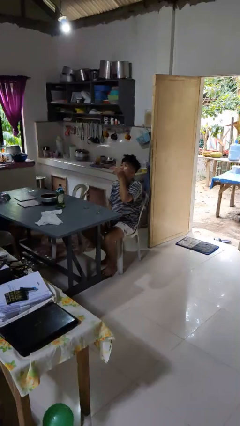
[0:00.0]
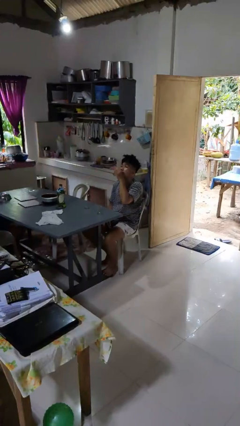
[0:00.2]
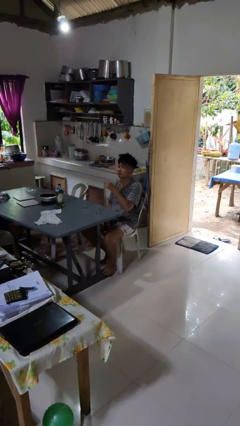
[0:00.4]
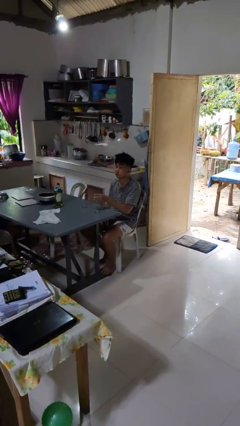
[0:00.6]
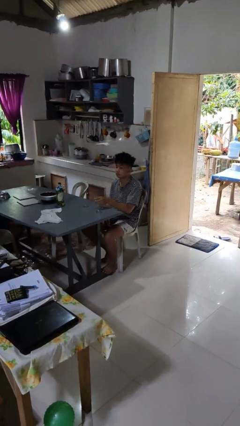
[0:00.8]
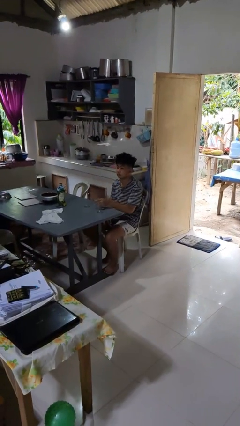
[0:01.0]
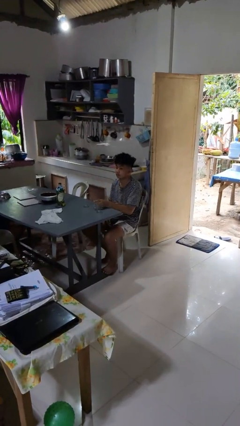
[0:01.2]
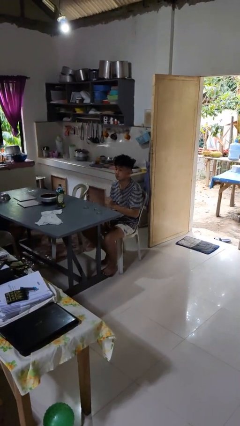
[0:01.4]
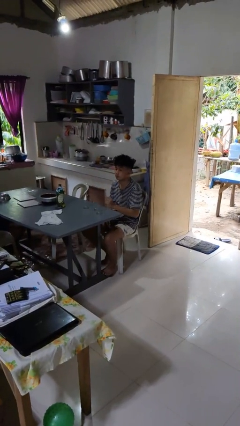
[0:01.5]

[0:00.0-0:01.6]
person puts down object on table

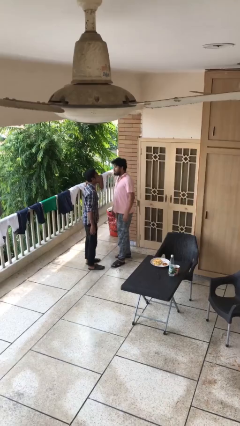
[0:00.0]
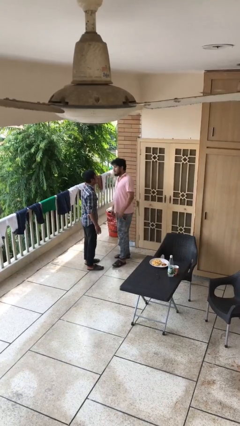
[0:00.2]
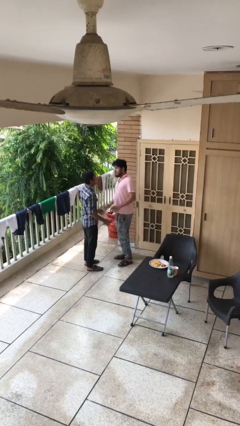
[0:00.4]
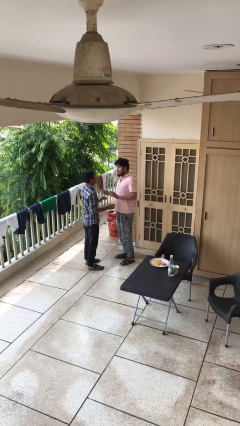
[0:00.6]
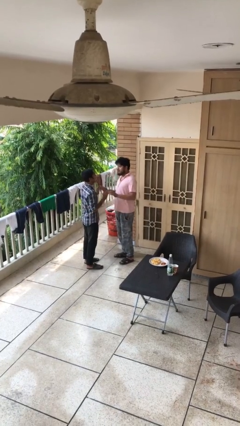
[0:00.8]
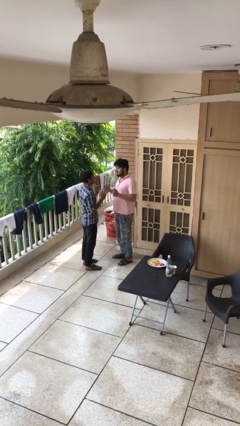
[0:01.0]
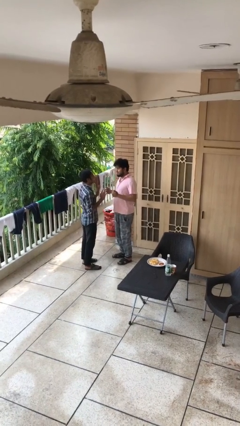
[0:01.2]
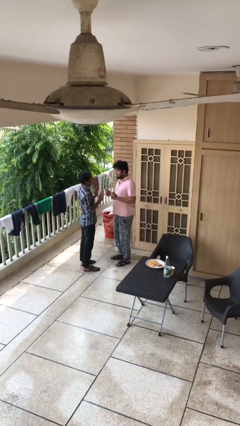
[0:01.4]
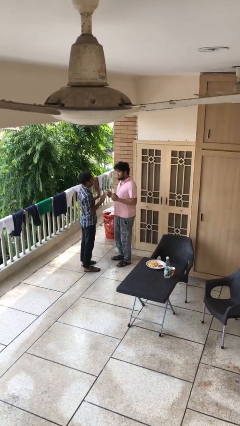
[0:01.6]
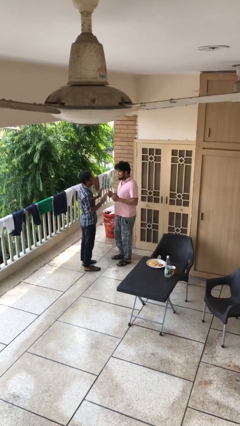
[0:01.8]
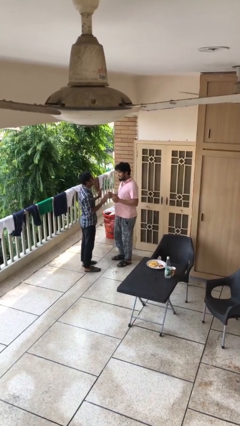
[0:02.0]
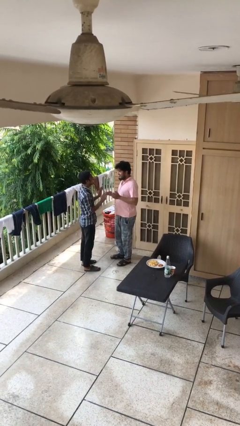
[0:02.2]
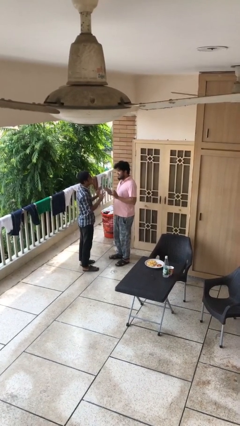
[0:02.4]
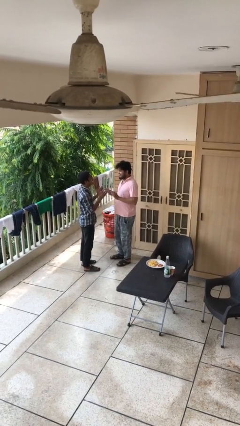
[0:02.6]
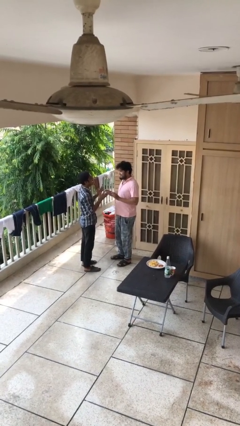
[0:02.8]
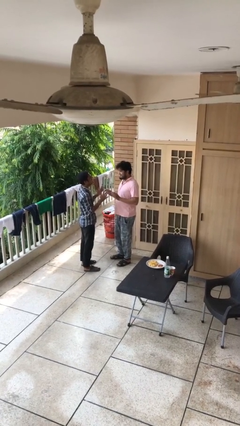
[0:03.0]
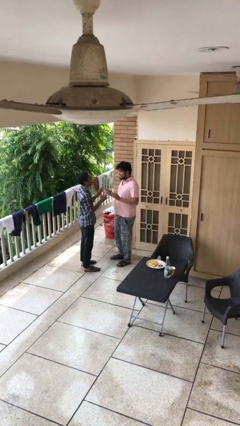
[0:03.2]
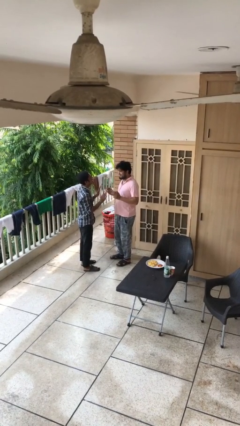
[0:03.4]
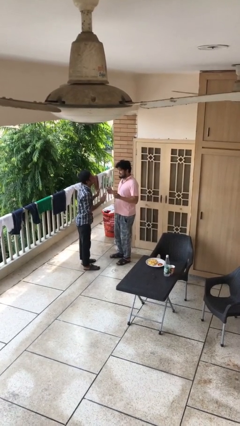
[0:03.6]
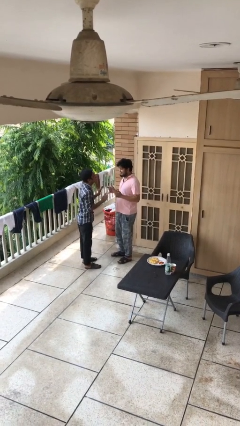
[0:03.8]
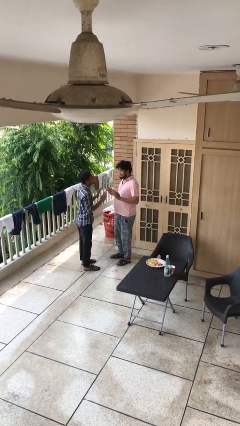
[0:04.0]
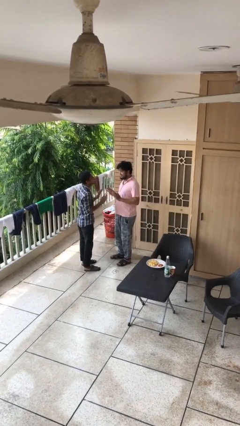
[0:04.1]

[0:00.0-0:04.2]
person talks to person

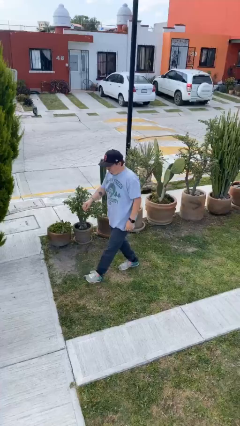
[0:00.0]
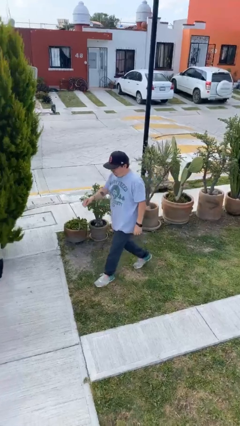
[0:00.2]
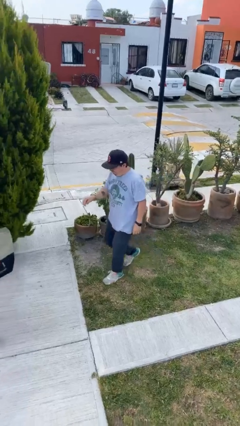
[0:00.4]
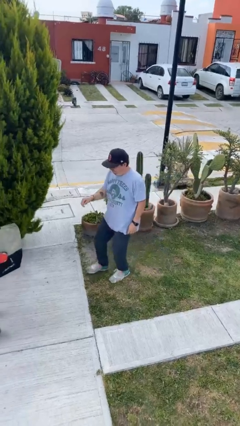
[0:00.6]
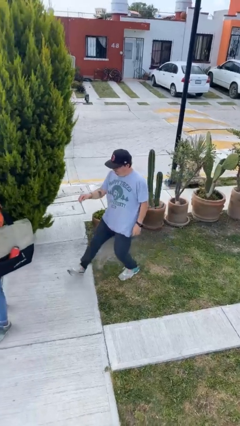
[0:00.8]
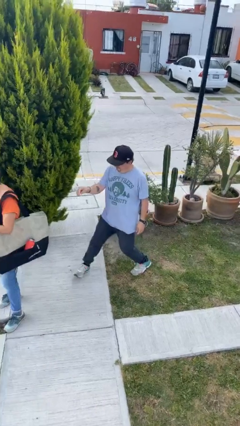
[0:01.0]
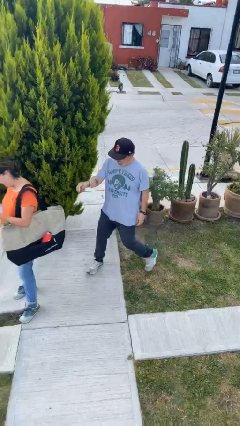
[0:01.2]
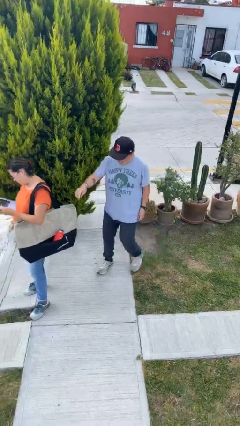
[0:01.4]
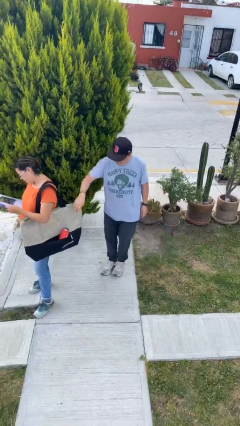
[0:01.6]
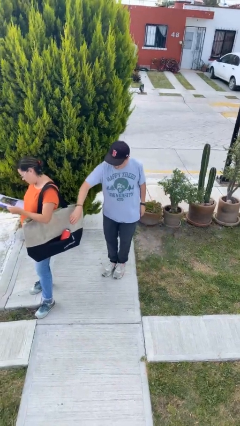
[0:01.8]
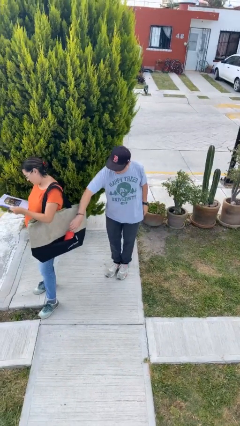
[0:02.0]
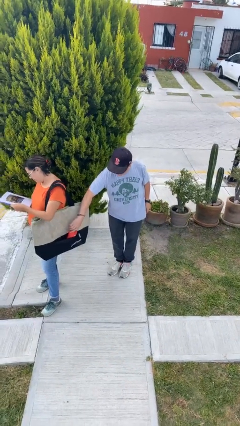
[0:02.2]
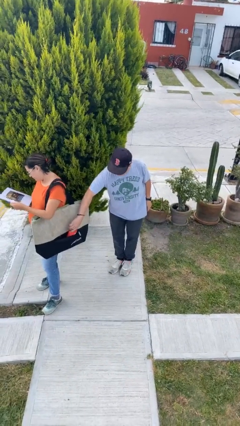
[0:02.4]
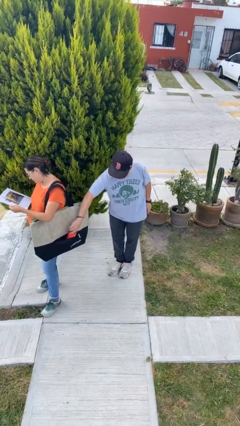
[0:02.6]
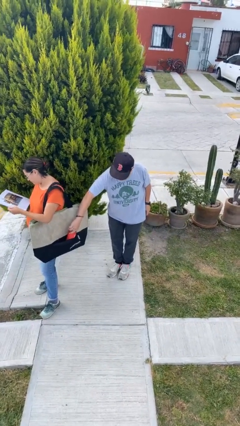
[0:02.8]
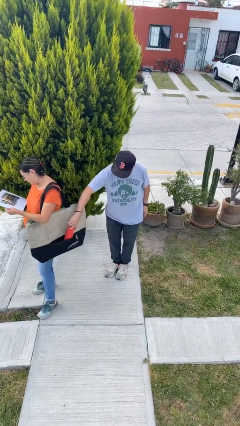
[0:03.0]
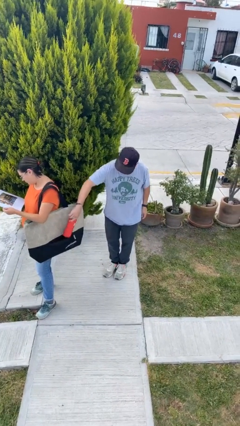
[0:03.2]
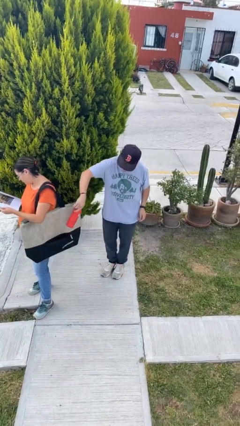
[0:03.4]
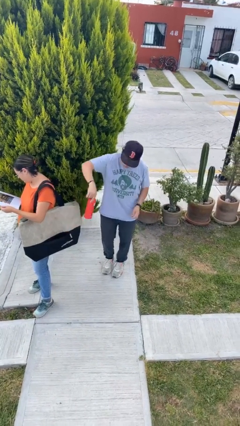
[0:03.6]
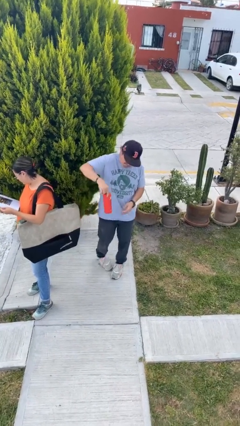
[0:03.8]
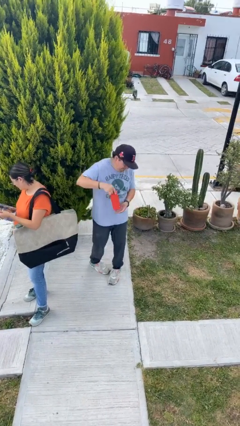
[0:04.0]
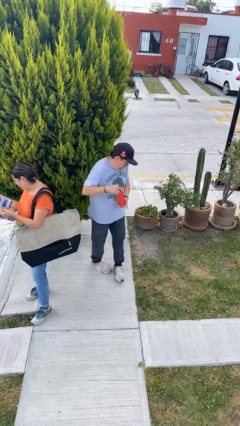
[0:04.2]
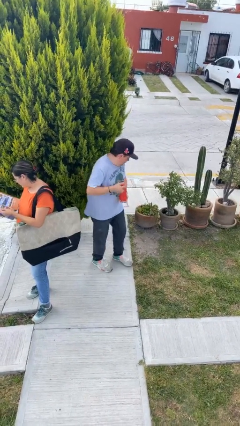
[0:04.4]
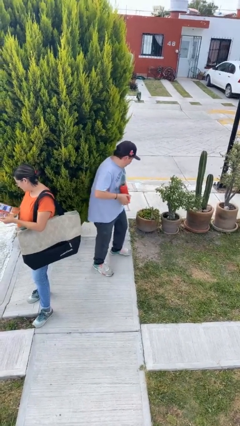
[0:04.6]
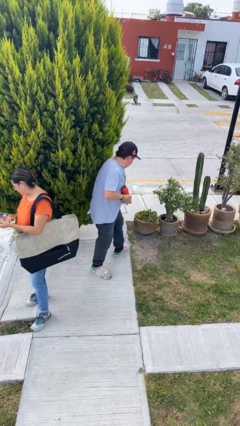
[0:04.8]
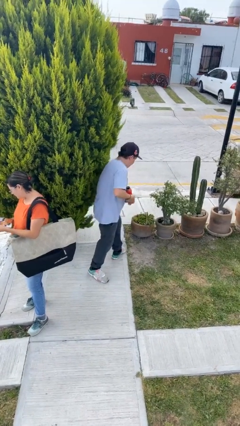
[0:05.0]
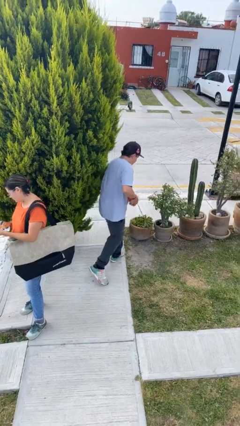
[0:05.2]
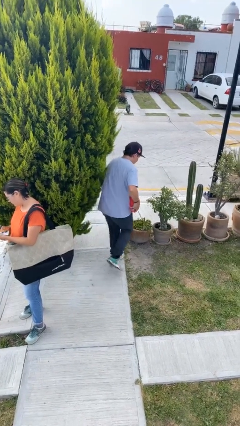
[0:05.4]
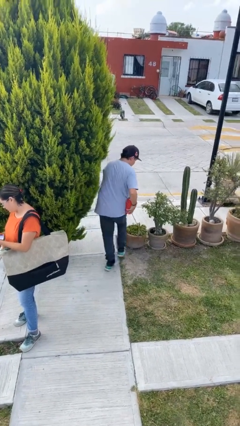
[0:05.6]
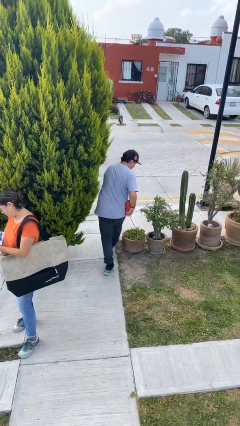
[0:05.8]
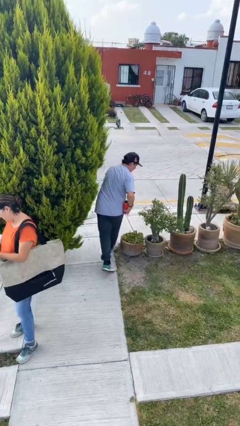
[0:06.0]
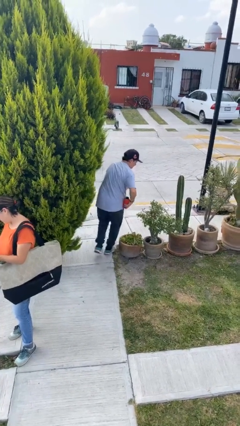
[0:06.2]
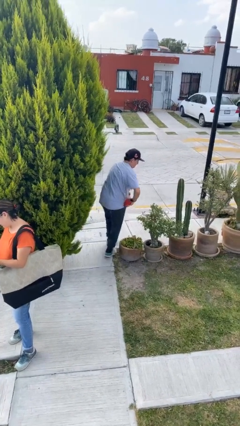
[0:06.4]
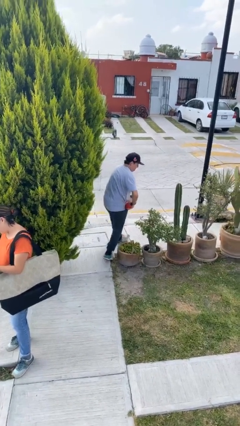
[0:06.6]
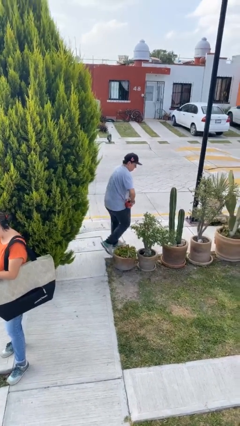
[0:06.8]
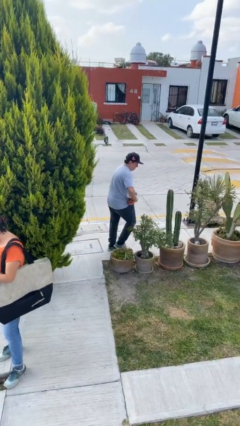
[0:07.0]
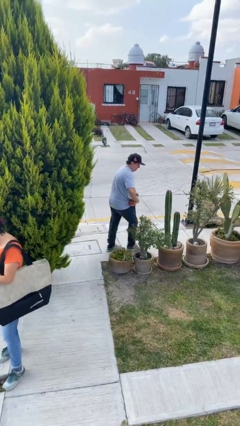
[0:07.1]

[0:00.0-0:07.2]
person steals object from person

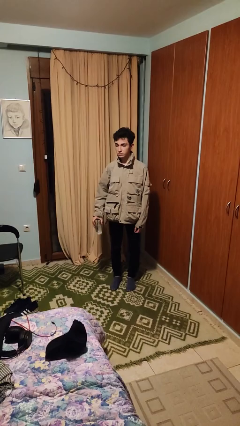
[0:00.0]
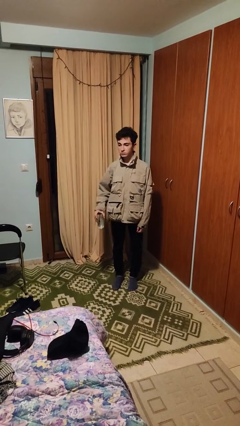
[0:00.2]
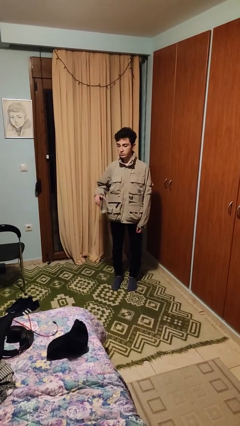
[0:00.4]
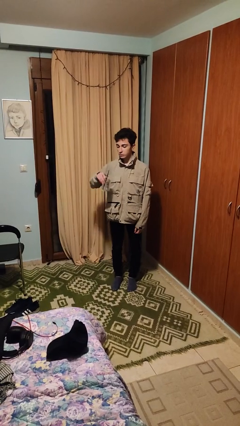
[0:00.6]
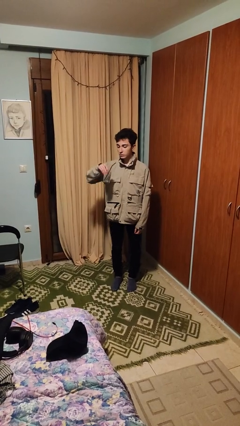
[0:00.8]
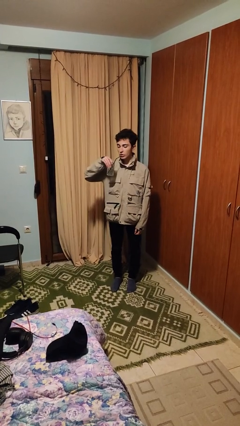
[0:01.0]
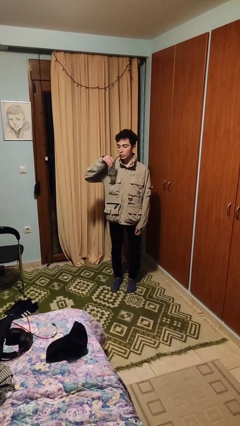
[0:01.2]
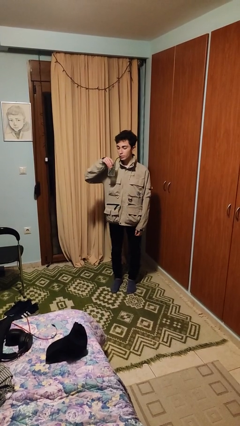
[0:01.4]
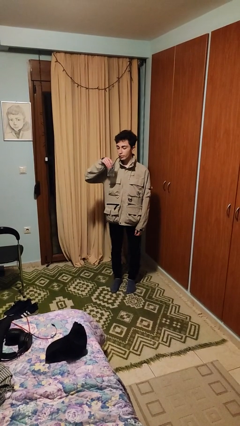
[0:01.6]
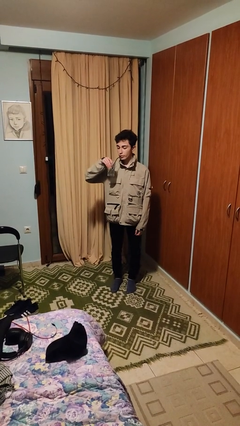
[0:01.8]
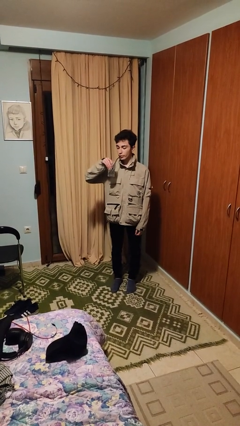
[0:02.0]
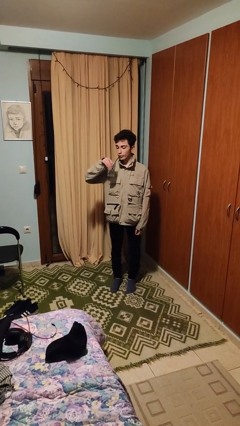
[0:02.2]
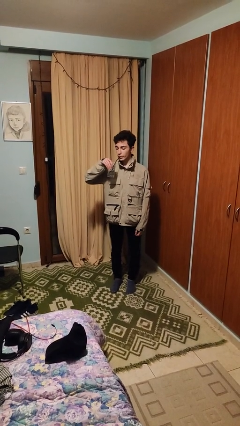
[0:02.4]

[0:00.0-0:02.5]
person drinks from straw

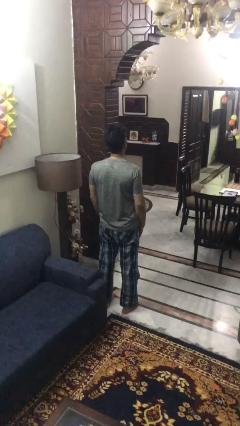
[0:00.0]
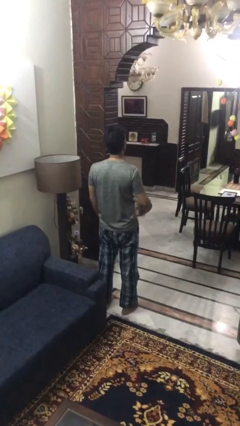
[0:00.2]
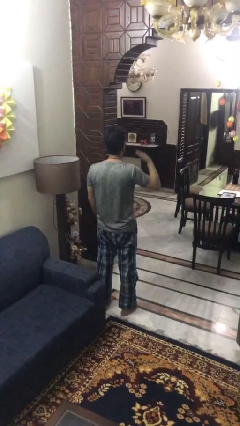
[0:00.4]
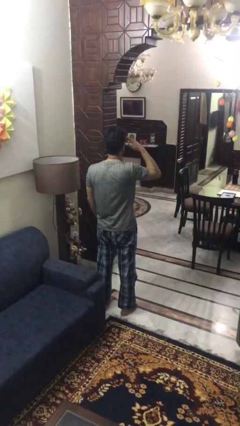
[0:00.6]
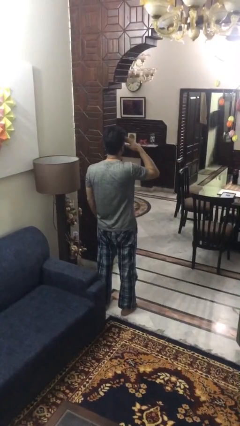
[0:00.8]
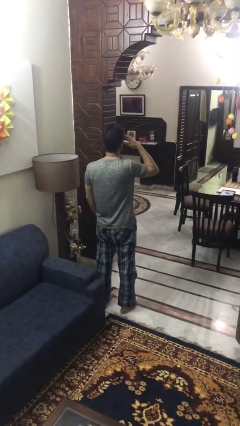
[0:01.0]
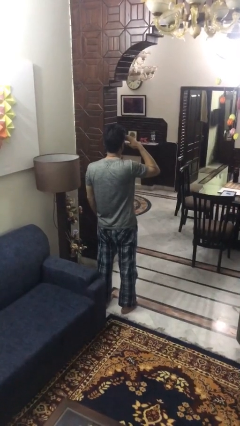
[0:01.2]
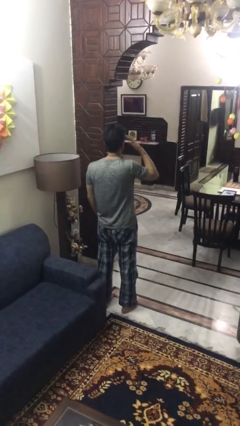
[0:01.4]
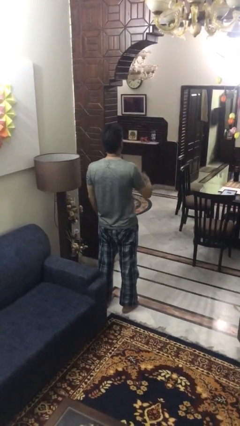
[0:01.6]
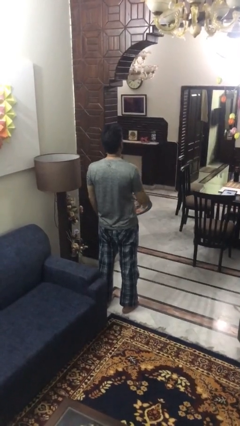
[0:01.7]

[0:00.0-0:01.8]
person salutes
